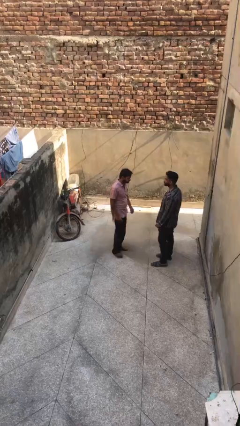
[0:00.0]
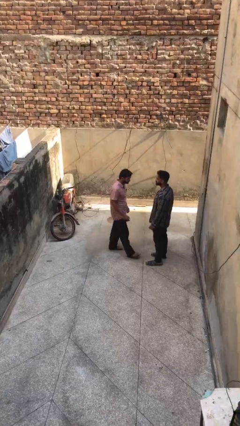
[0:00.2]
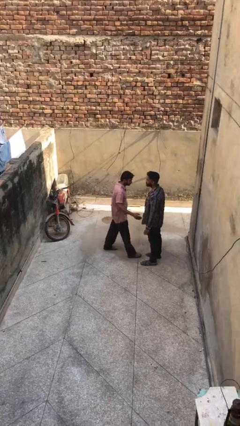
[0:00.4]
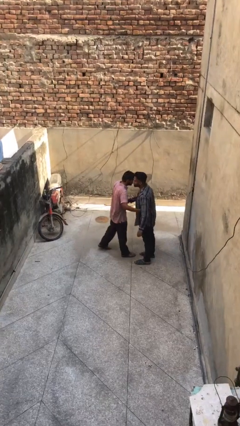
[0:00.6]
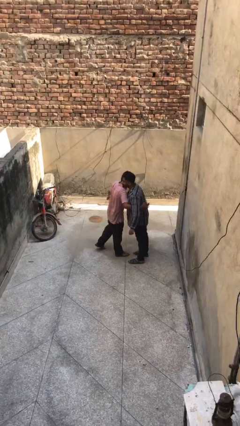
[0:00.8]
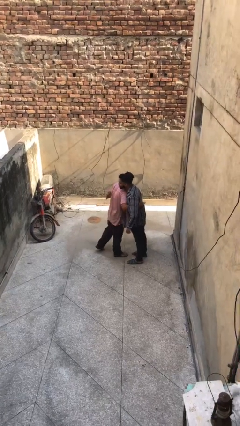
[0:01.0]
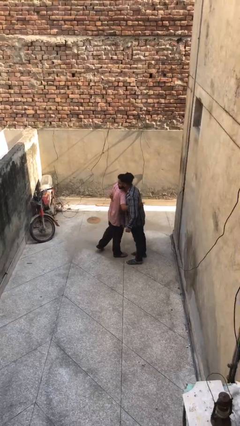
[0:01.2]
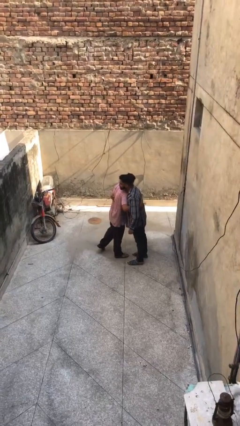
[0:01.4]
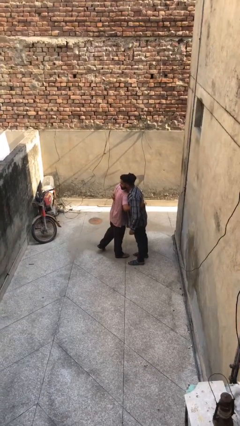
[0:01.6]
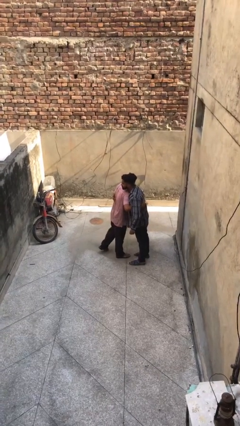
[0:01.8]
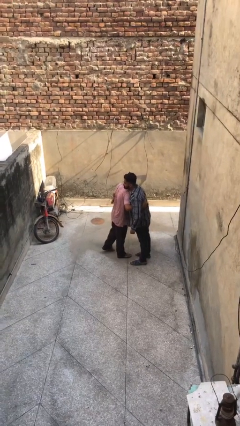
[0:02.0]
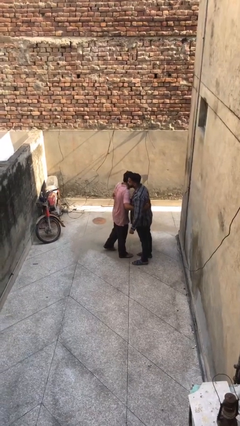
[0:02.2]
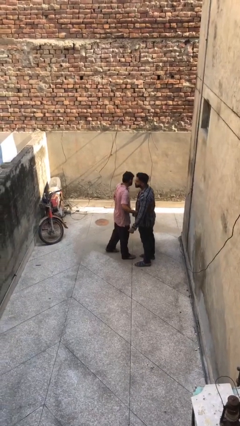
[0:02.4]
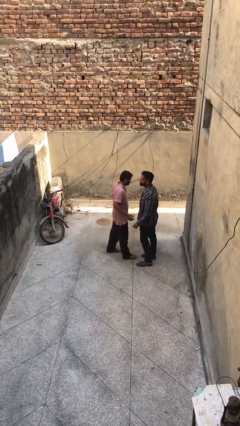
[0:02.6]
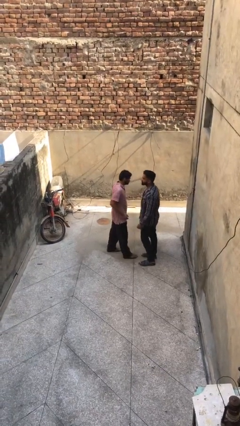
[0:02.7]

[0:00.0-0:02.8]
person embraces person

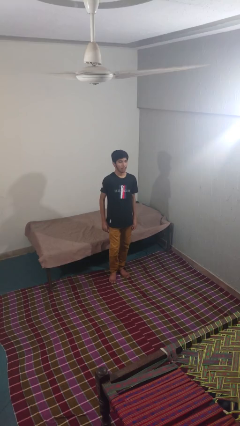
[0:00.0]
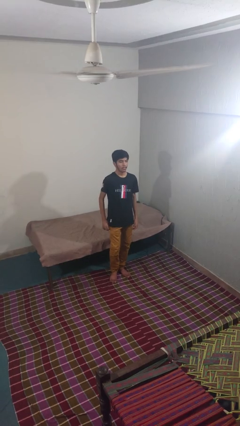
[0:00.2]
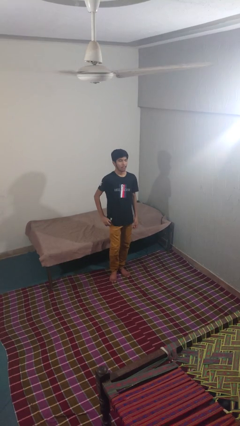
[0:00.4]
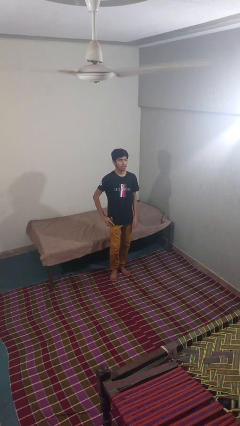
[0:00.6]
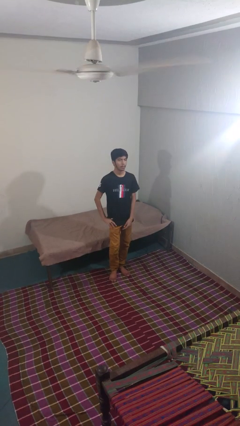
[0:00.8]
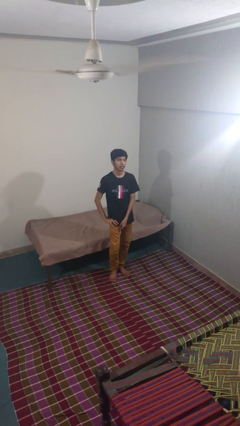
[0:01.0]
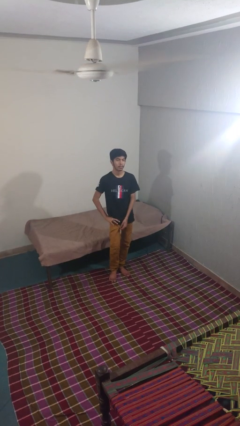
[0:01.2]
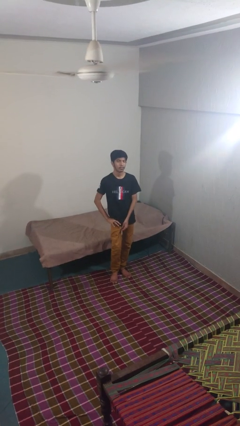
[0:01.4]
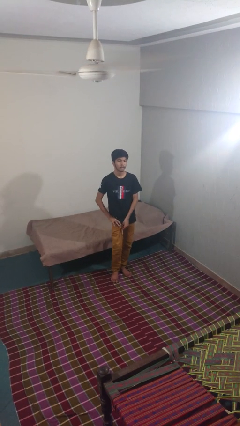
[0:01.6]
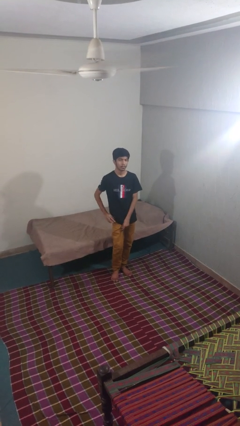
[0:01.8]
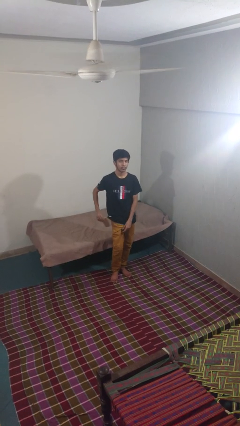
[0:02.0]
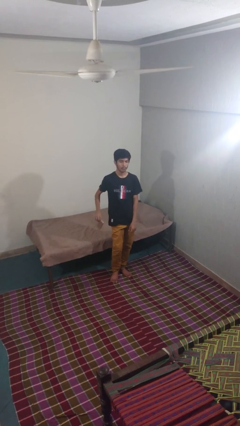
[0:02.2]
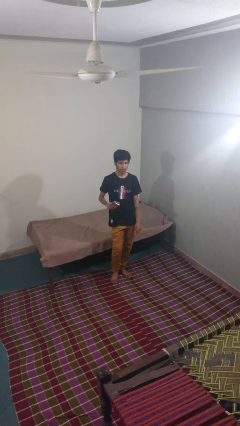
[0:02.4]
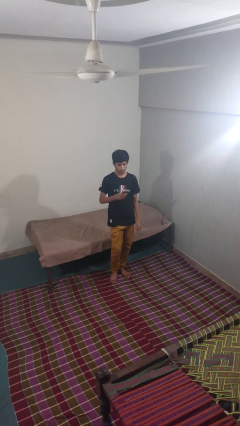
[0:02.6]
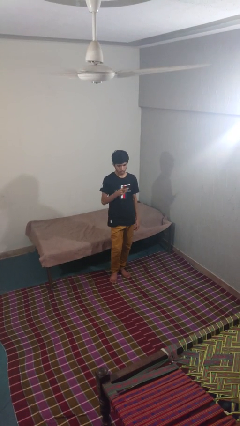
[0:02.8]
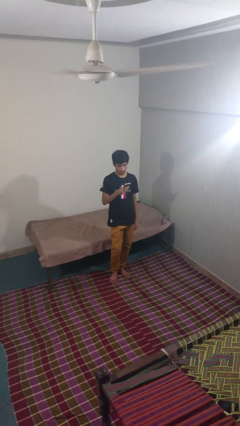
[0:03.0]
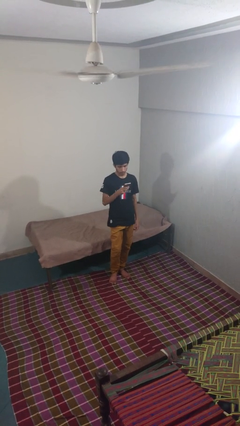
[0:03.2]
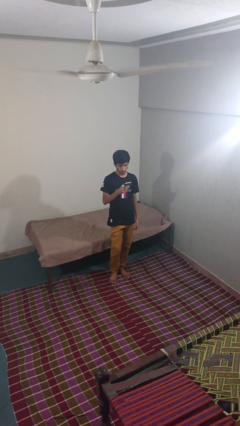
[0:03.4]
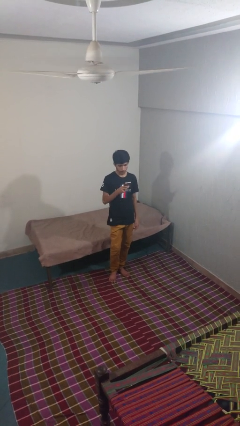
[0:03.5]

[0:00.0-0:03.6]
person takes phone from pocket

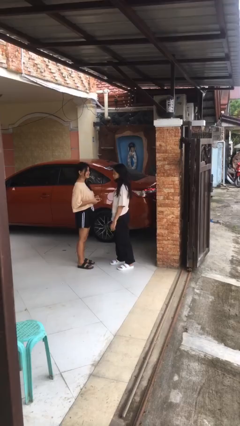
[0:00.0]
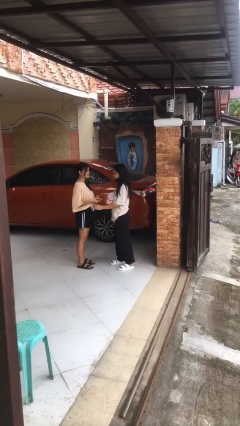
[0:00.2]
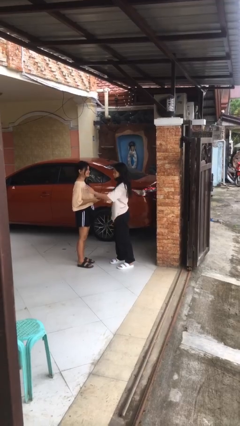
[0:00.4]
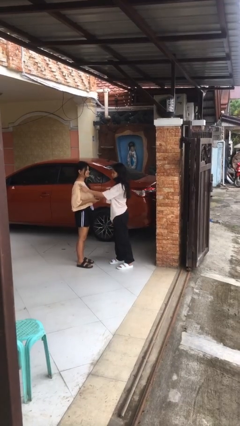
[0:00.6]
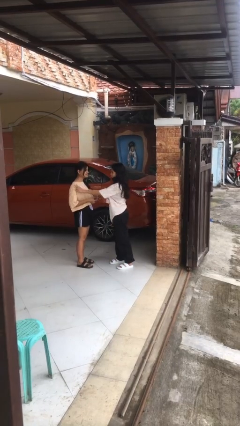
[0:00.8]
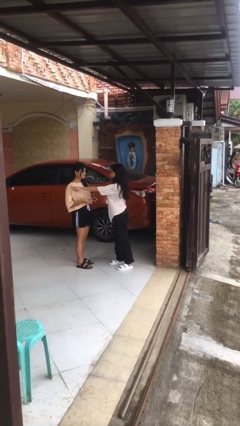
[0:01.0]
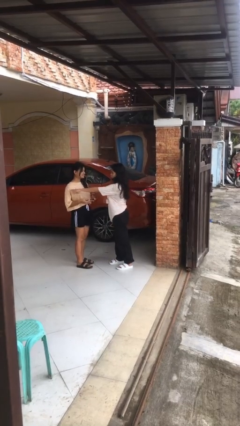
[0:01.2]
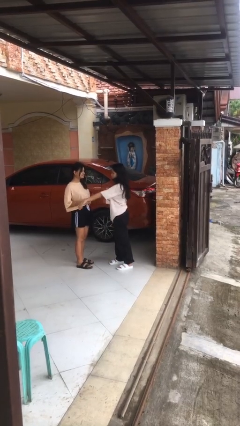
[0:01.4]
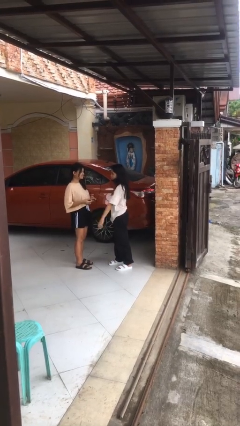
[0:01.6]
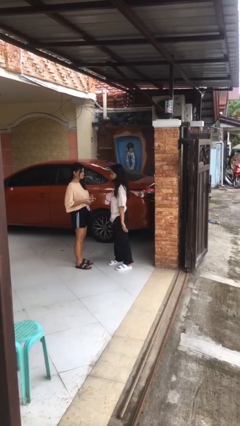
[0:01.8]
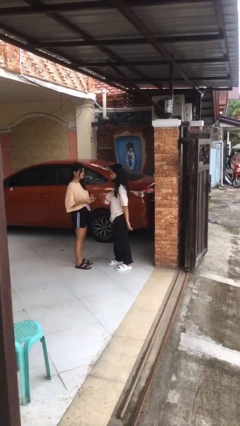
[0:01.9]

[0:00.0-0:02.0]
person shoves person

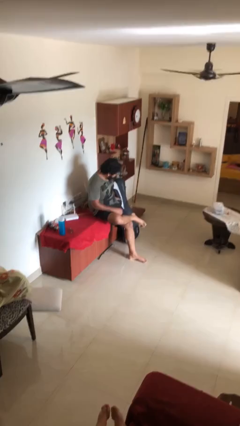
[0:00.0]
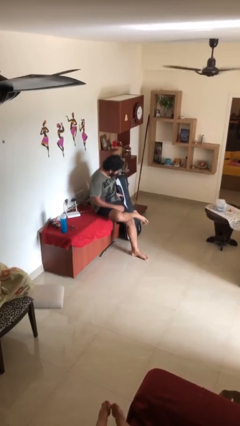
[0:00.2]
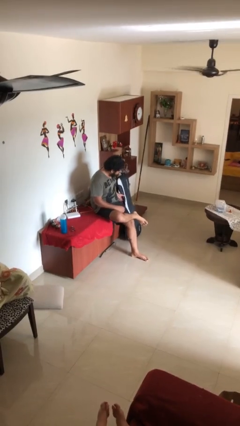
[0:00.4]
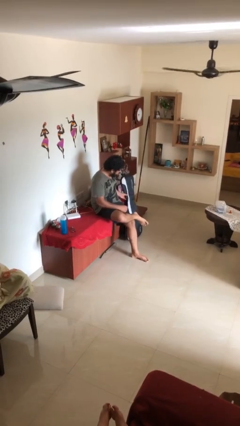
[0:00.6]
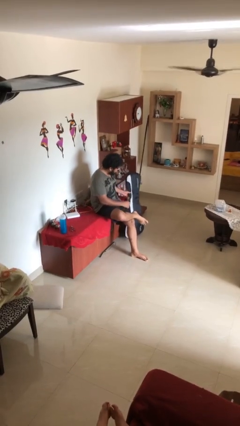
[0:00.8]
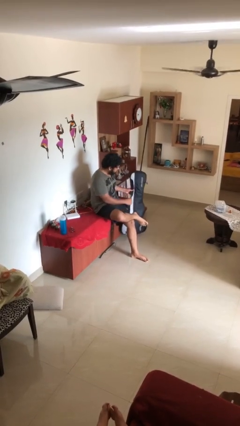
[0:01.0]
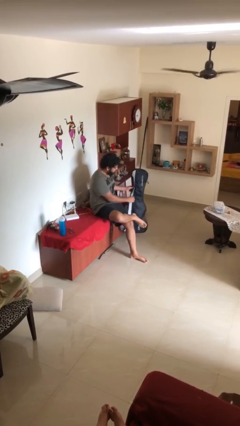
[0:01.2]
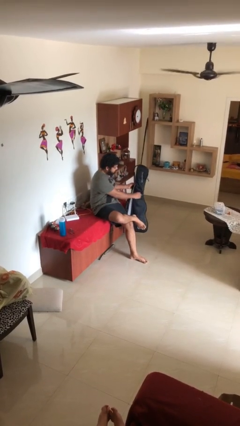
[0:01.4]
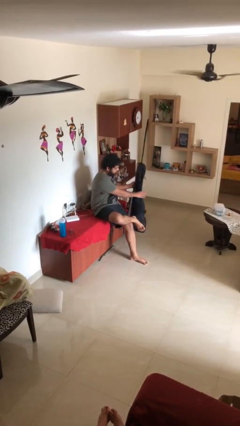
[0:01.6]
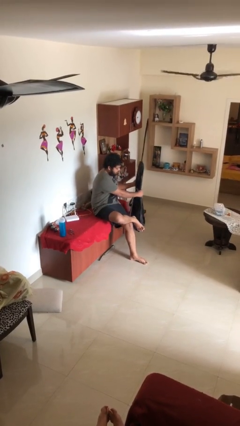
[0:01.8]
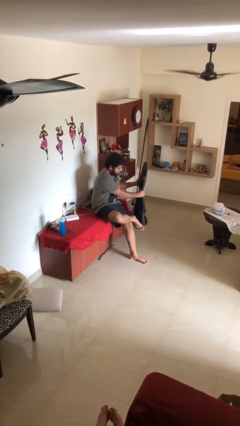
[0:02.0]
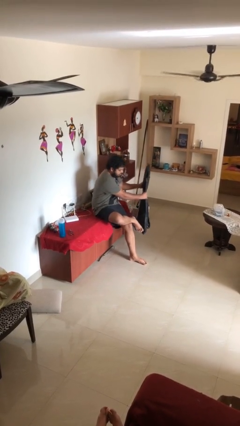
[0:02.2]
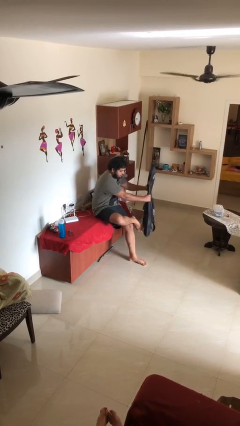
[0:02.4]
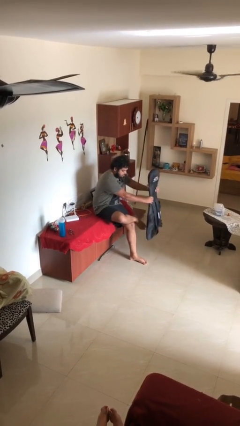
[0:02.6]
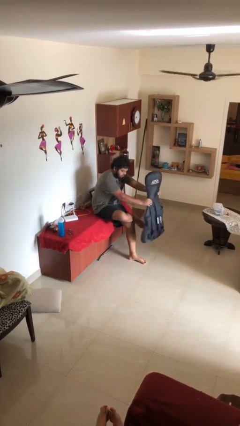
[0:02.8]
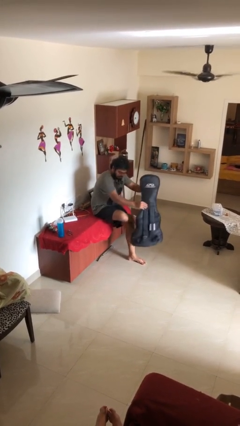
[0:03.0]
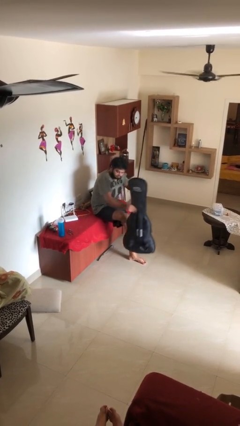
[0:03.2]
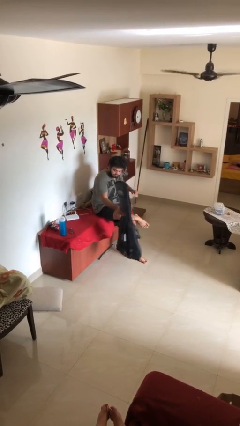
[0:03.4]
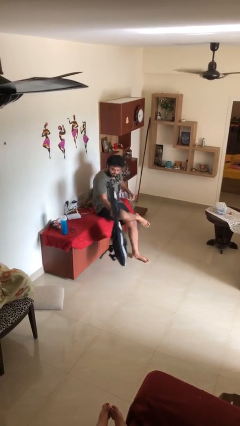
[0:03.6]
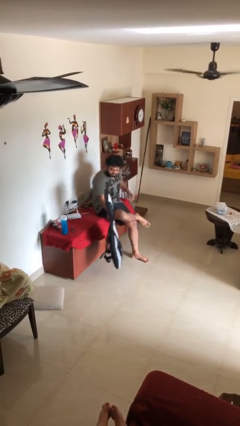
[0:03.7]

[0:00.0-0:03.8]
person picks up object from floor

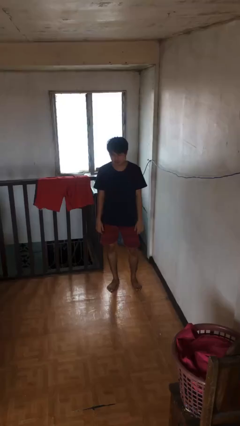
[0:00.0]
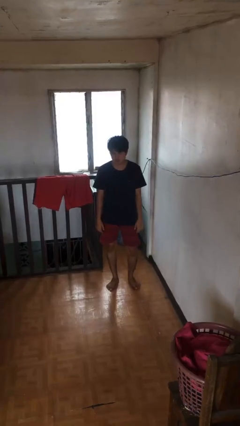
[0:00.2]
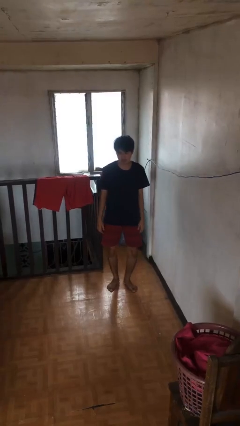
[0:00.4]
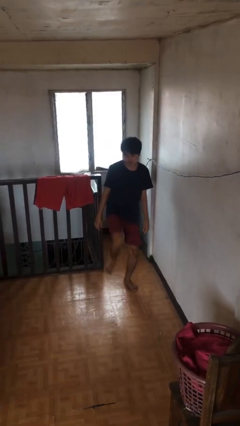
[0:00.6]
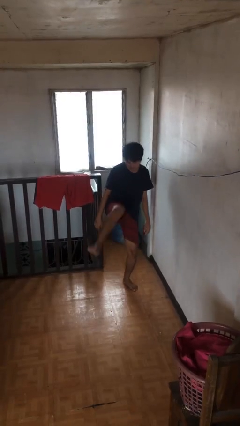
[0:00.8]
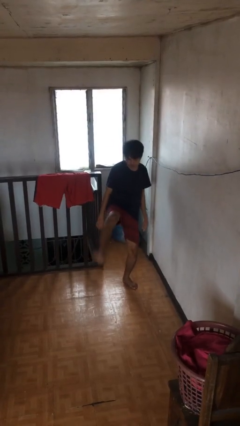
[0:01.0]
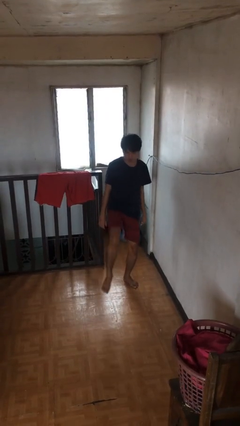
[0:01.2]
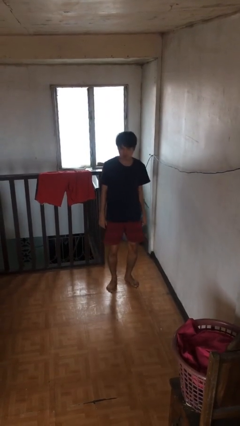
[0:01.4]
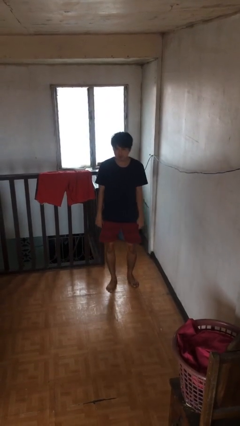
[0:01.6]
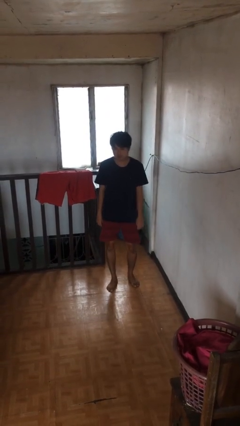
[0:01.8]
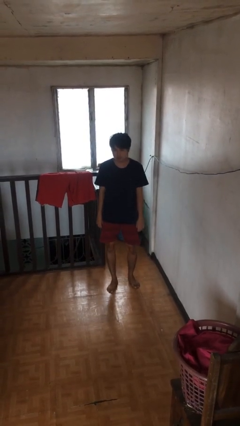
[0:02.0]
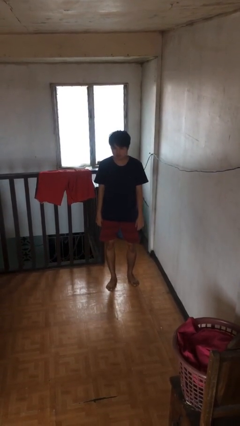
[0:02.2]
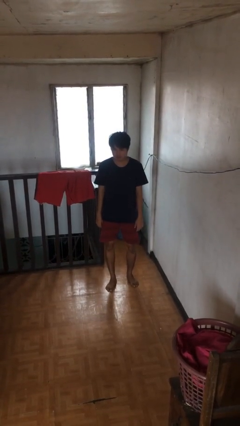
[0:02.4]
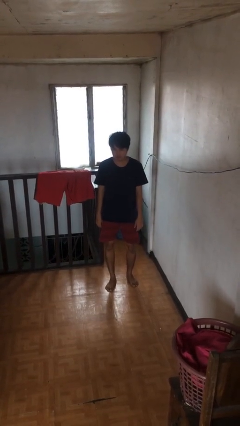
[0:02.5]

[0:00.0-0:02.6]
person karate kicks

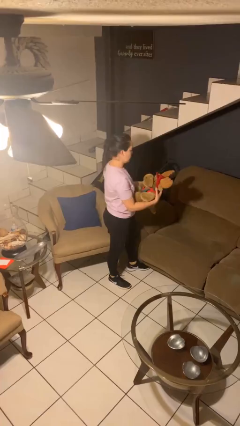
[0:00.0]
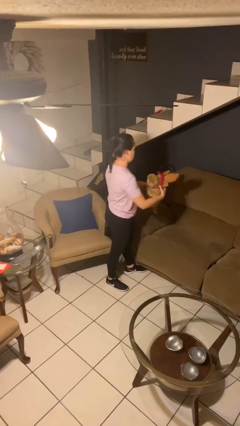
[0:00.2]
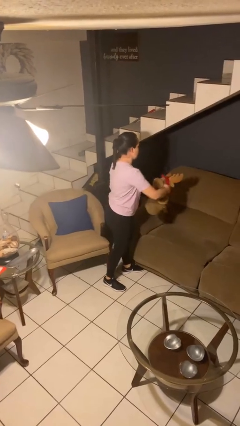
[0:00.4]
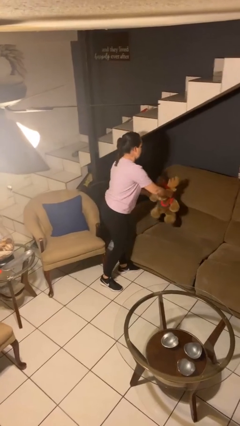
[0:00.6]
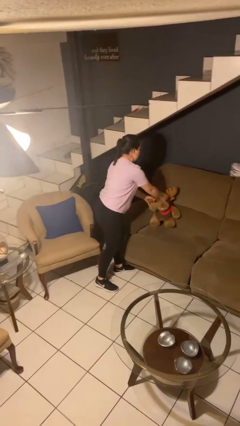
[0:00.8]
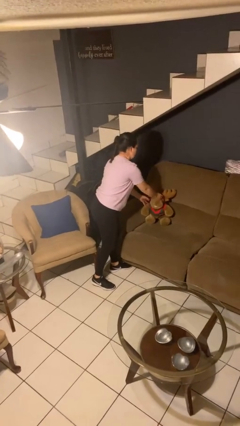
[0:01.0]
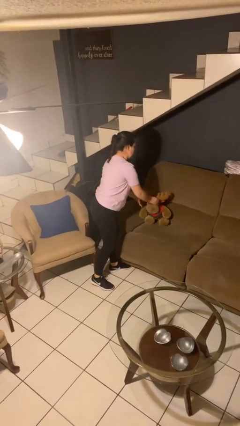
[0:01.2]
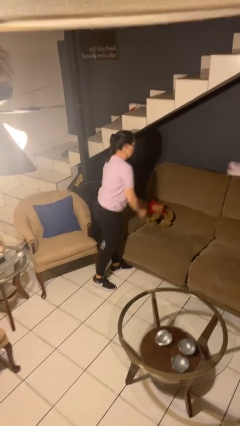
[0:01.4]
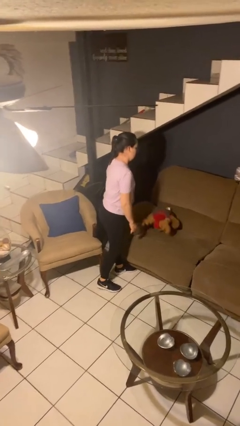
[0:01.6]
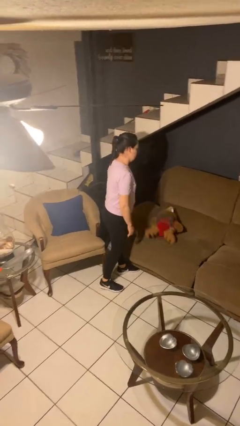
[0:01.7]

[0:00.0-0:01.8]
person puts down object on couch

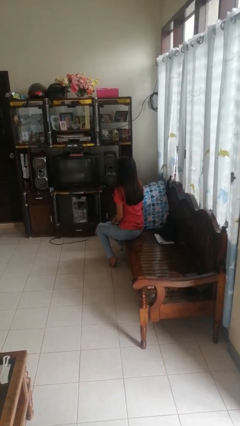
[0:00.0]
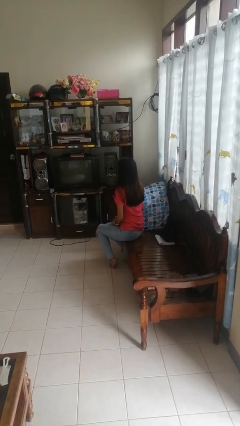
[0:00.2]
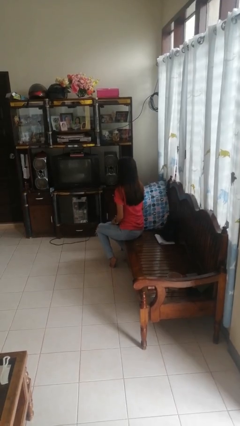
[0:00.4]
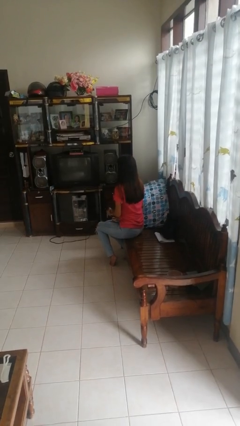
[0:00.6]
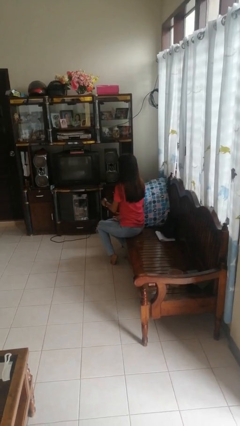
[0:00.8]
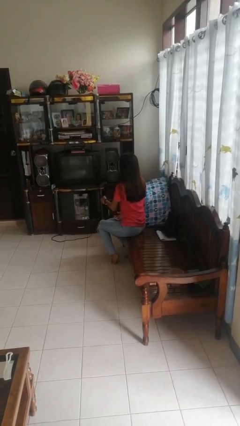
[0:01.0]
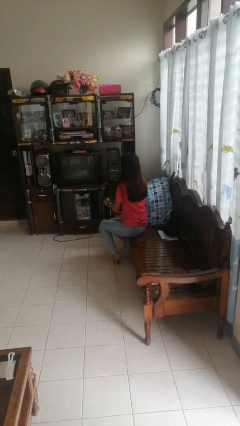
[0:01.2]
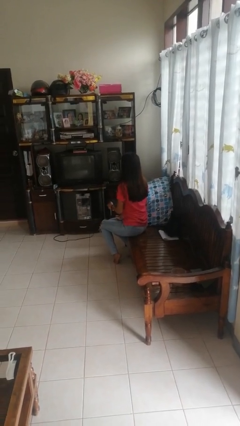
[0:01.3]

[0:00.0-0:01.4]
person uses television remote
